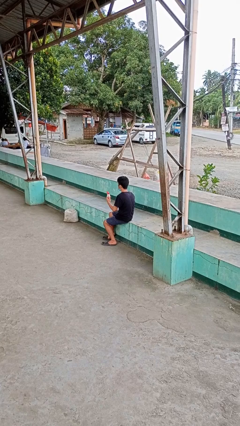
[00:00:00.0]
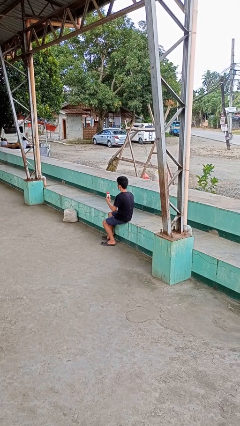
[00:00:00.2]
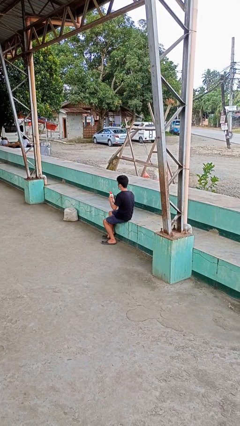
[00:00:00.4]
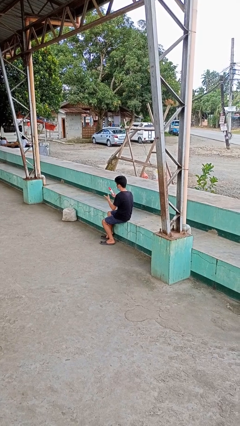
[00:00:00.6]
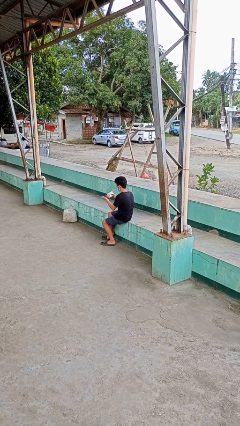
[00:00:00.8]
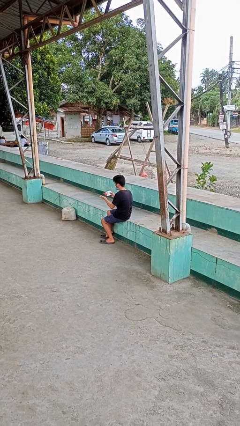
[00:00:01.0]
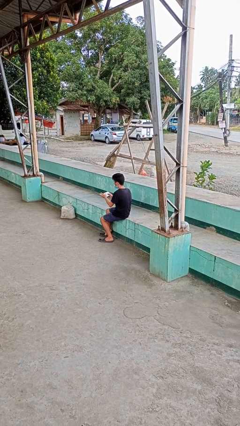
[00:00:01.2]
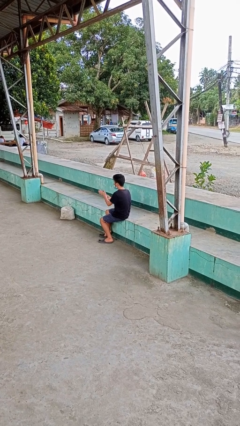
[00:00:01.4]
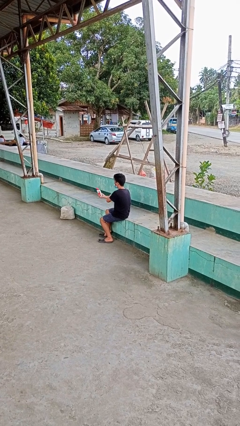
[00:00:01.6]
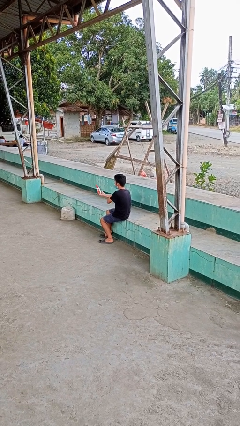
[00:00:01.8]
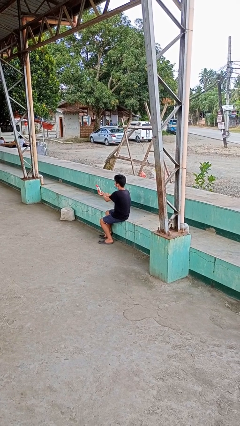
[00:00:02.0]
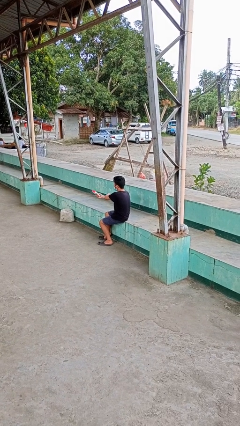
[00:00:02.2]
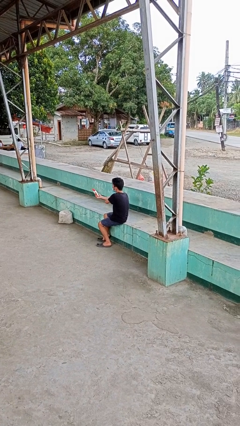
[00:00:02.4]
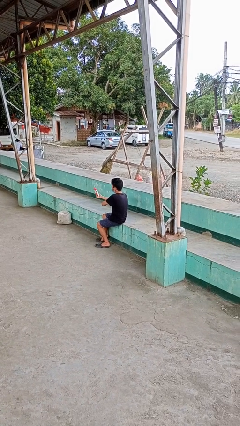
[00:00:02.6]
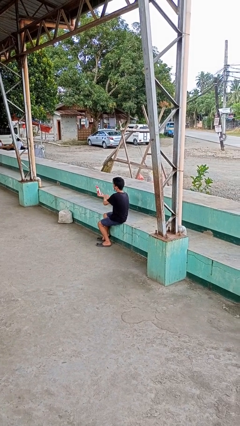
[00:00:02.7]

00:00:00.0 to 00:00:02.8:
person applies sunscreen

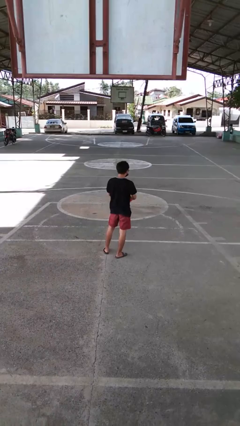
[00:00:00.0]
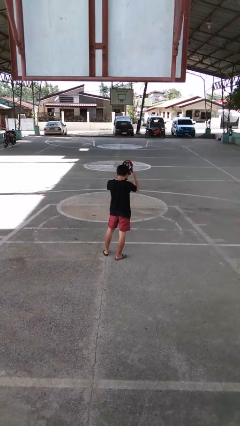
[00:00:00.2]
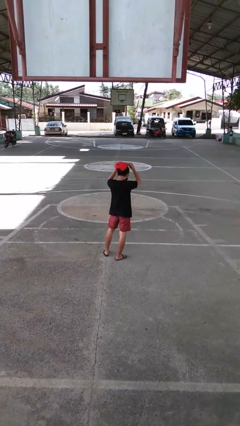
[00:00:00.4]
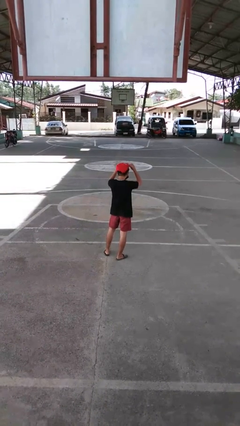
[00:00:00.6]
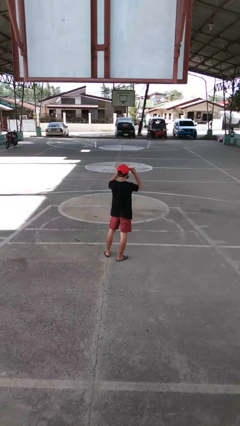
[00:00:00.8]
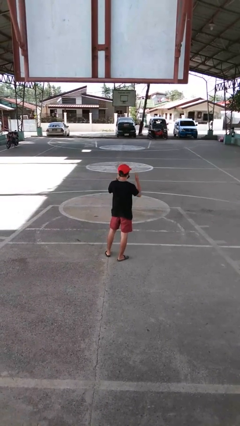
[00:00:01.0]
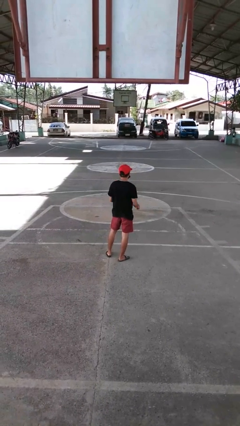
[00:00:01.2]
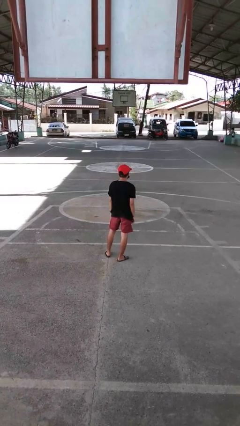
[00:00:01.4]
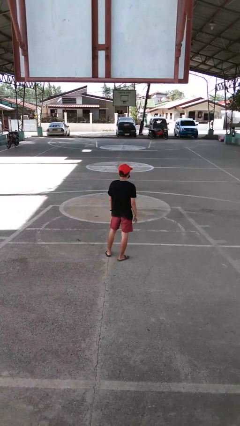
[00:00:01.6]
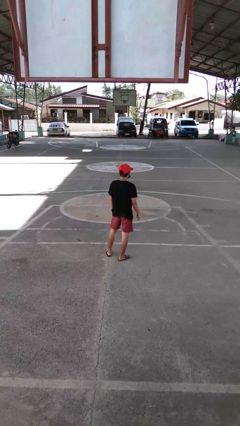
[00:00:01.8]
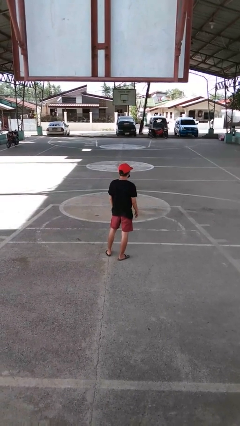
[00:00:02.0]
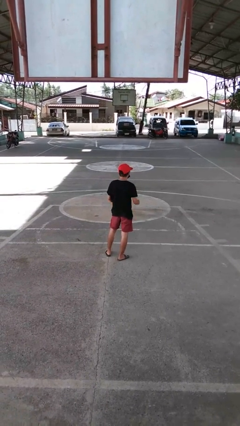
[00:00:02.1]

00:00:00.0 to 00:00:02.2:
person puts on hat

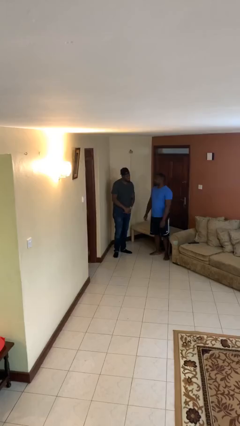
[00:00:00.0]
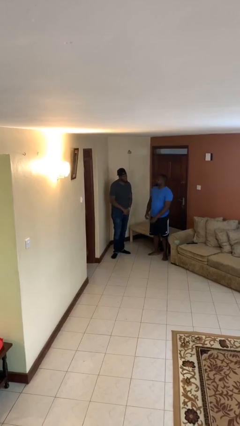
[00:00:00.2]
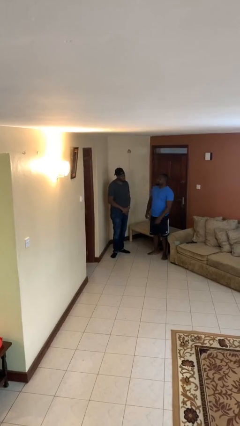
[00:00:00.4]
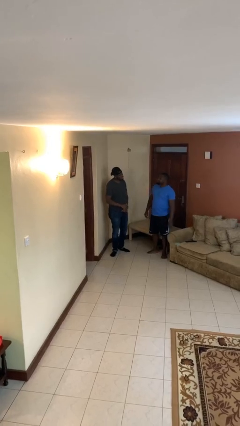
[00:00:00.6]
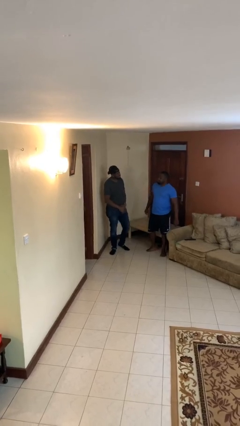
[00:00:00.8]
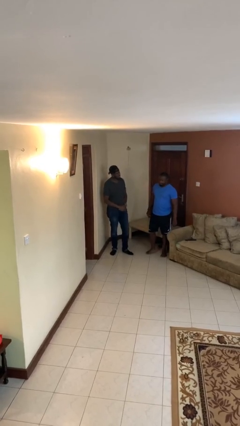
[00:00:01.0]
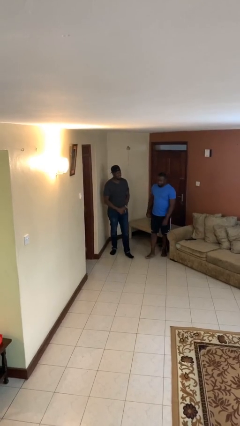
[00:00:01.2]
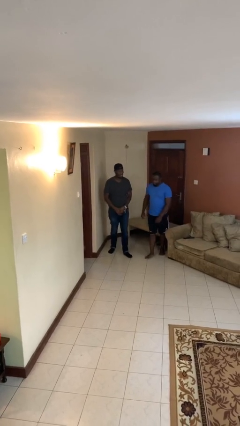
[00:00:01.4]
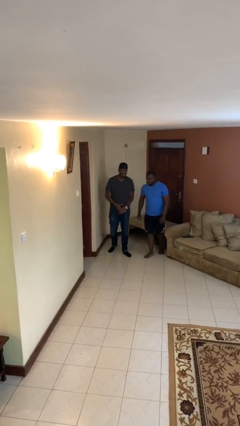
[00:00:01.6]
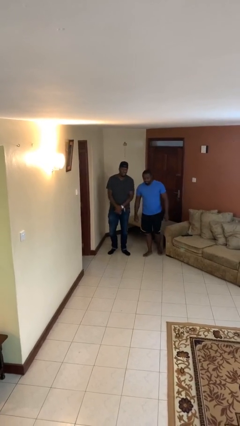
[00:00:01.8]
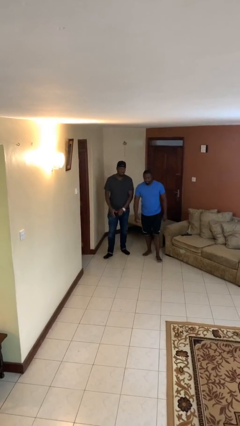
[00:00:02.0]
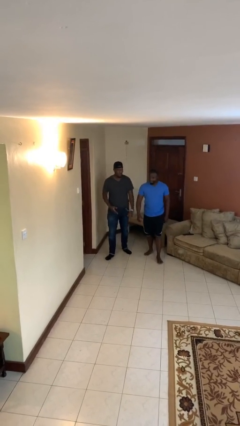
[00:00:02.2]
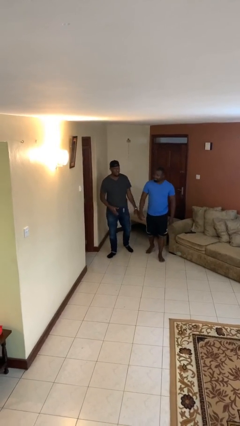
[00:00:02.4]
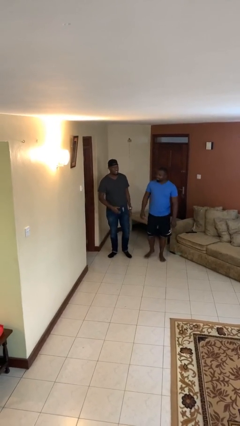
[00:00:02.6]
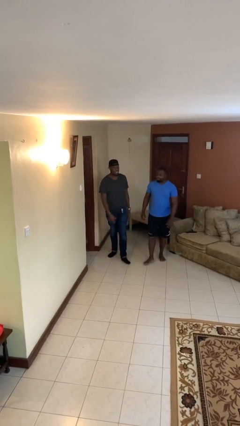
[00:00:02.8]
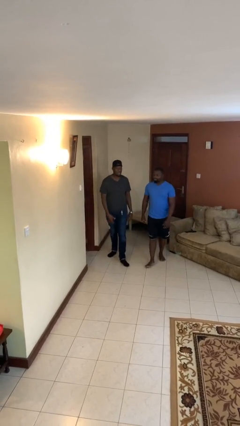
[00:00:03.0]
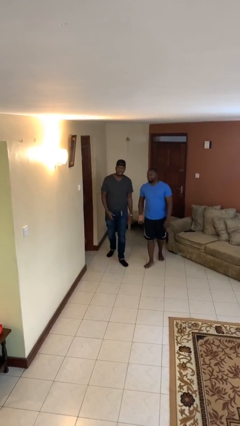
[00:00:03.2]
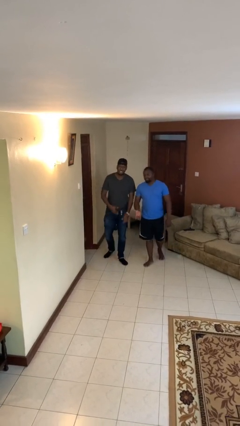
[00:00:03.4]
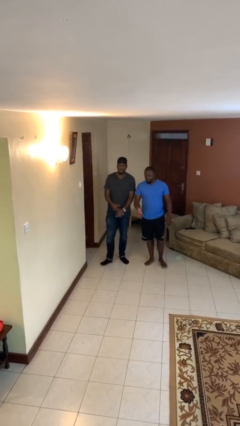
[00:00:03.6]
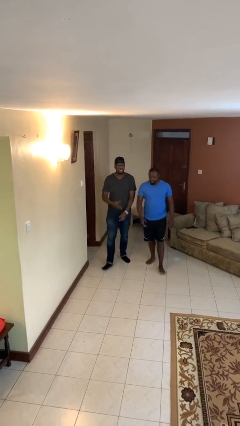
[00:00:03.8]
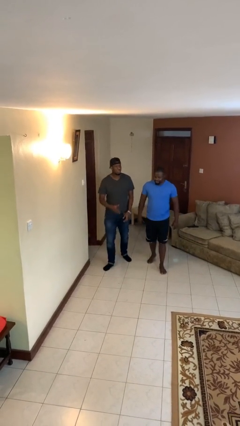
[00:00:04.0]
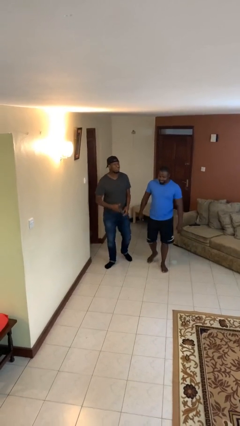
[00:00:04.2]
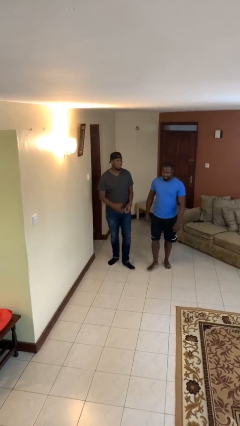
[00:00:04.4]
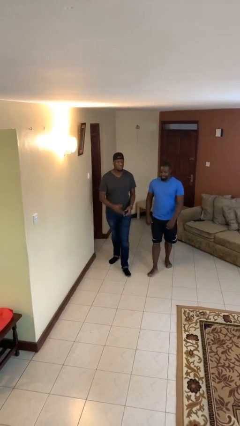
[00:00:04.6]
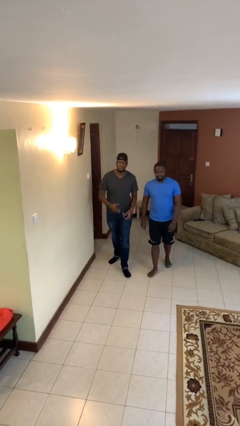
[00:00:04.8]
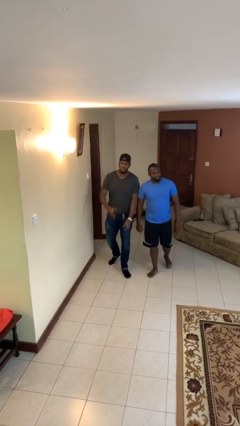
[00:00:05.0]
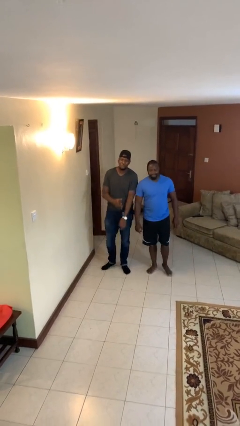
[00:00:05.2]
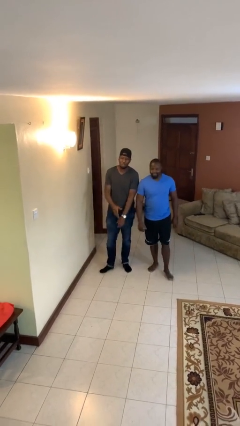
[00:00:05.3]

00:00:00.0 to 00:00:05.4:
person talks to person

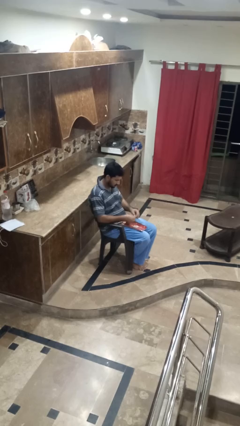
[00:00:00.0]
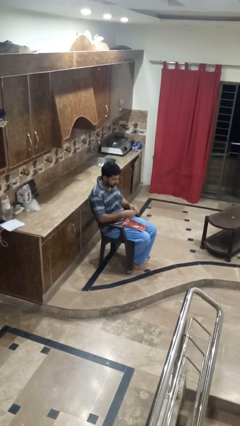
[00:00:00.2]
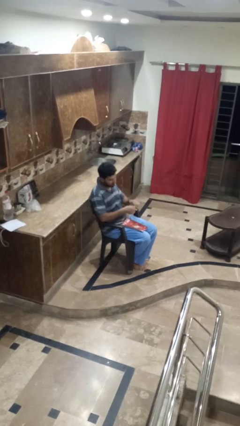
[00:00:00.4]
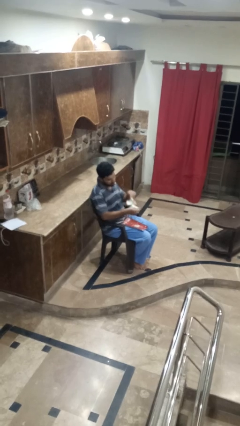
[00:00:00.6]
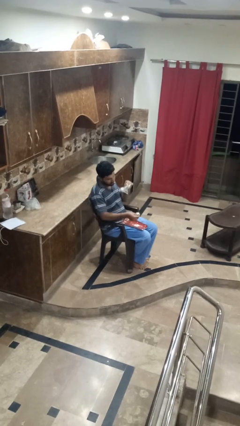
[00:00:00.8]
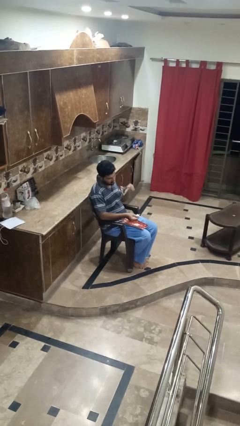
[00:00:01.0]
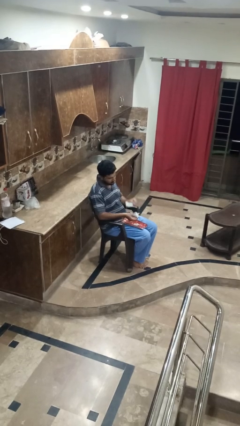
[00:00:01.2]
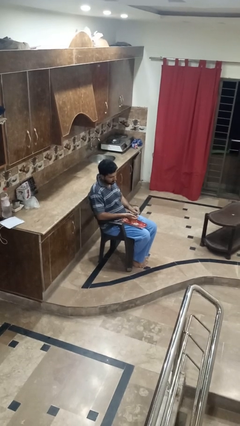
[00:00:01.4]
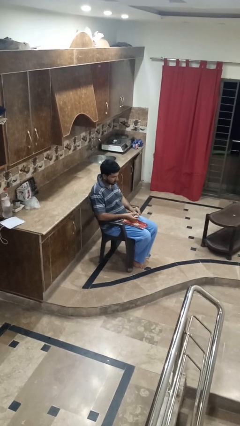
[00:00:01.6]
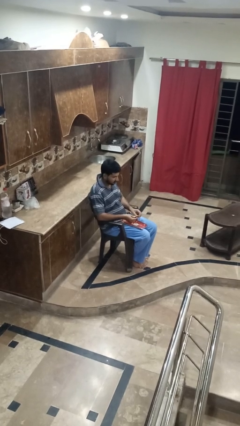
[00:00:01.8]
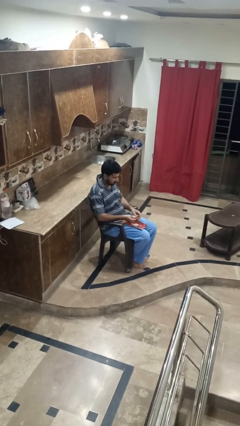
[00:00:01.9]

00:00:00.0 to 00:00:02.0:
person tears paper

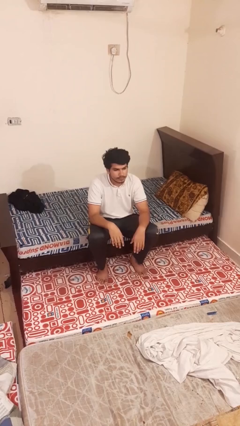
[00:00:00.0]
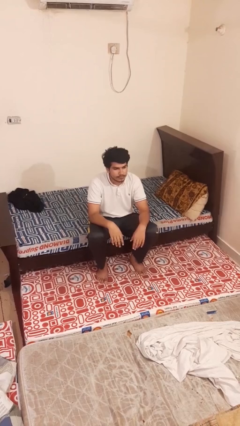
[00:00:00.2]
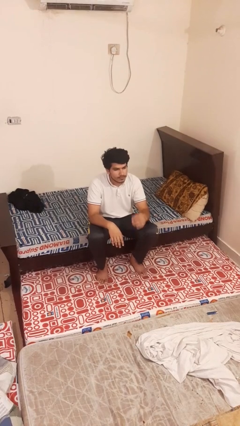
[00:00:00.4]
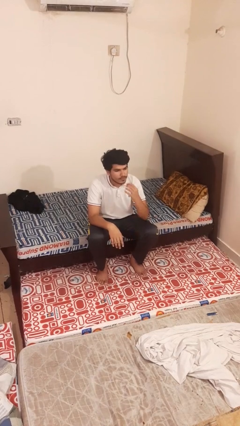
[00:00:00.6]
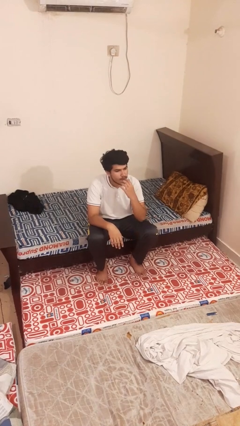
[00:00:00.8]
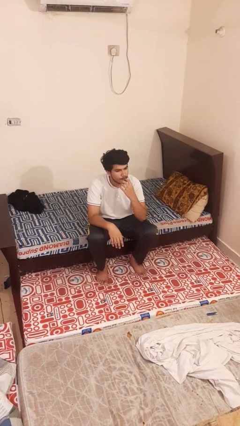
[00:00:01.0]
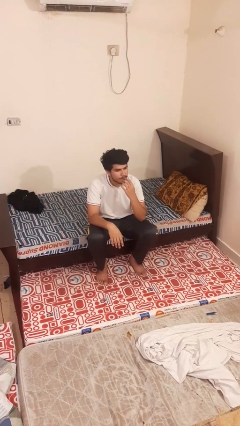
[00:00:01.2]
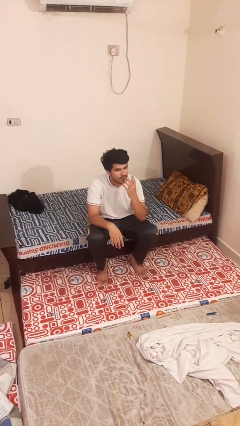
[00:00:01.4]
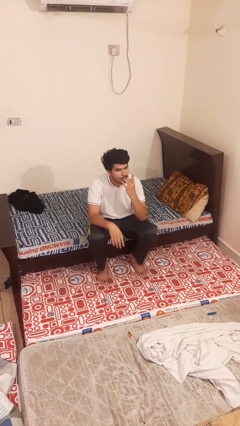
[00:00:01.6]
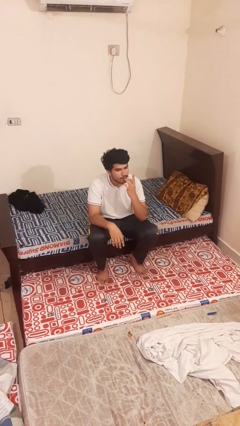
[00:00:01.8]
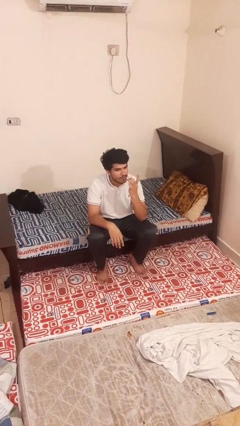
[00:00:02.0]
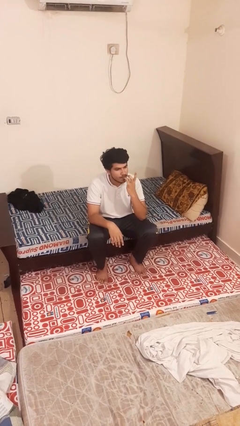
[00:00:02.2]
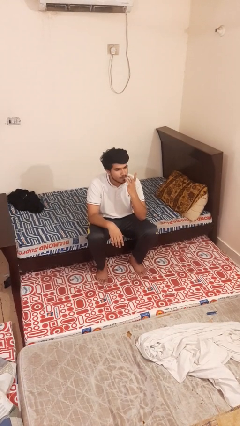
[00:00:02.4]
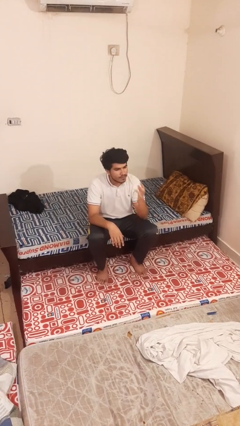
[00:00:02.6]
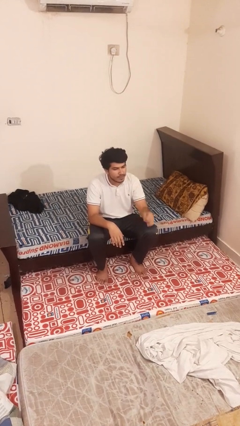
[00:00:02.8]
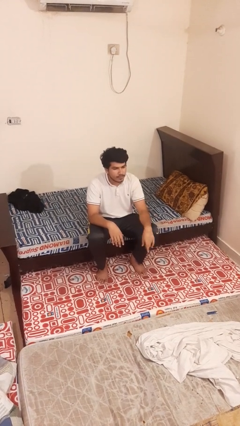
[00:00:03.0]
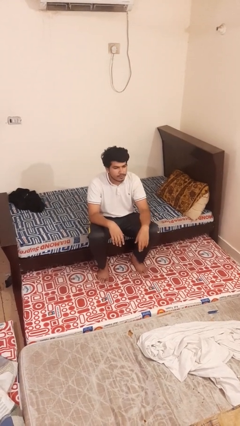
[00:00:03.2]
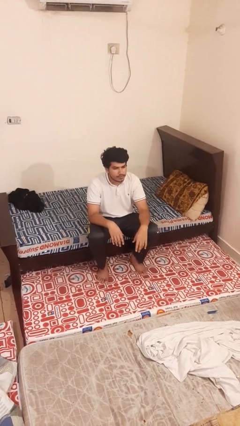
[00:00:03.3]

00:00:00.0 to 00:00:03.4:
person licks fingers

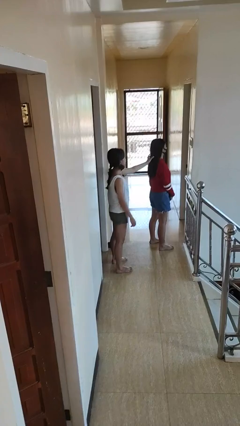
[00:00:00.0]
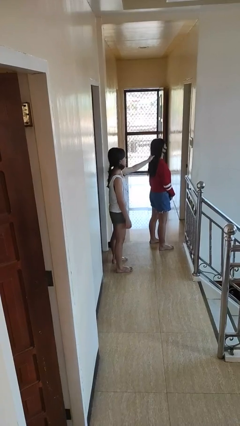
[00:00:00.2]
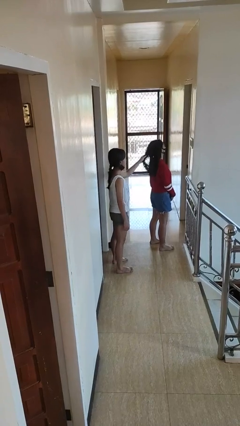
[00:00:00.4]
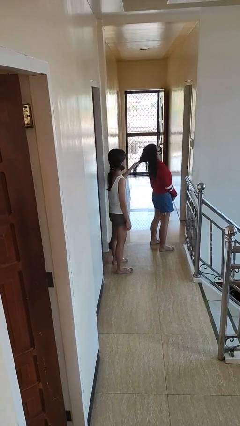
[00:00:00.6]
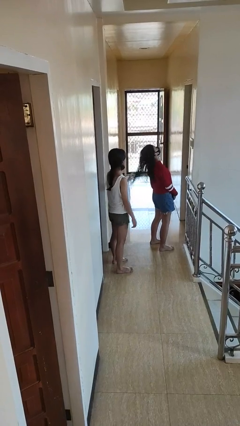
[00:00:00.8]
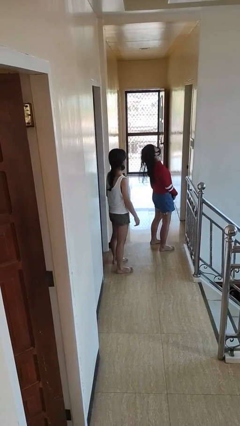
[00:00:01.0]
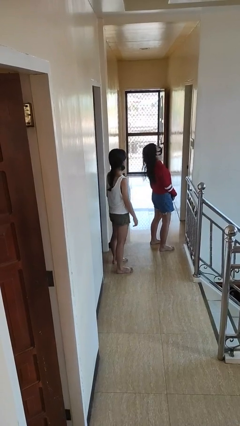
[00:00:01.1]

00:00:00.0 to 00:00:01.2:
person grabs person by hair

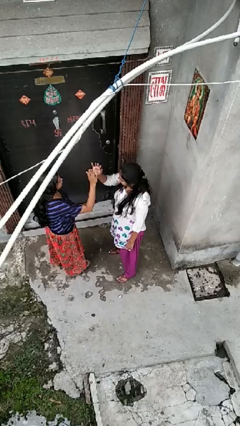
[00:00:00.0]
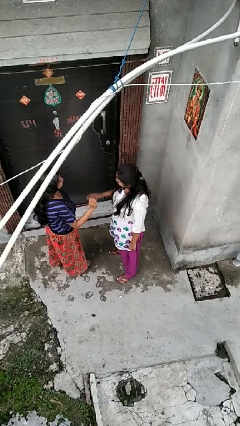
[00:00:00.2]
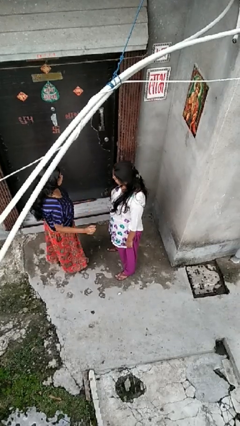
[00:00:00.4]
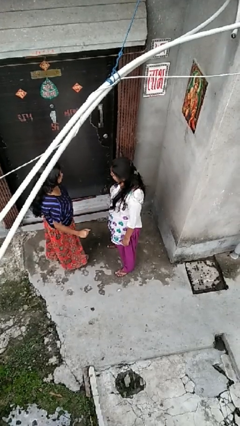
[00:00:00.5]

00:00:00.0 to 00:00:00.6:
person highfives hand
